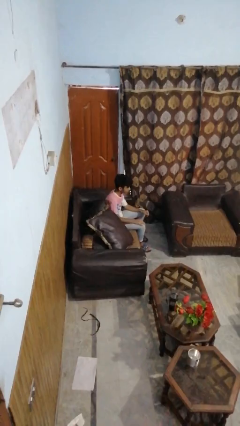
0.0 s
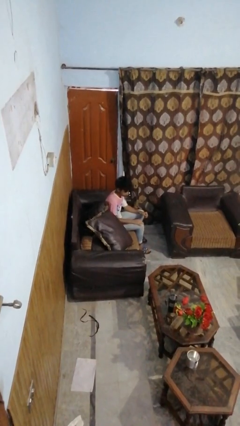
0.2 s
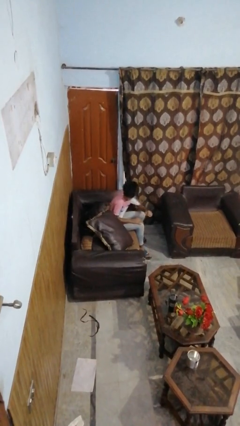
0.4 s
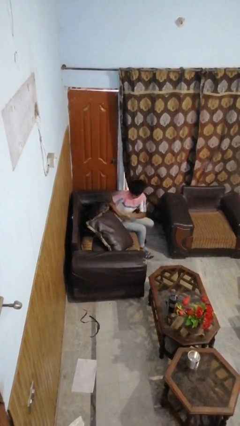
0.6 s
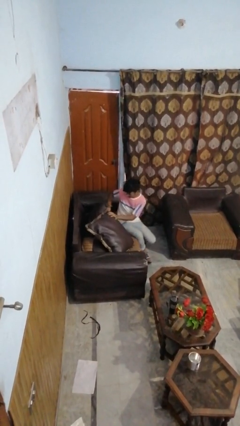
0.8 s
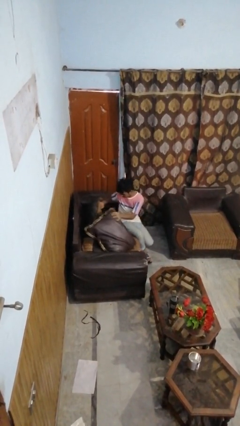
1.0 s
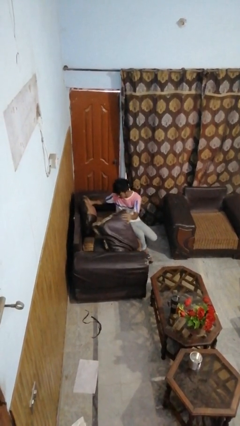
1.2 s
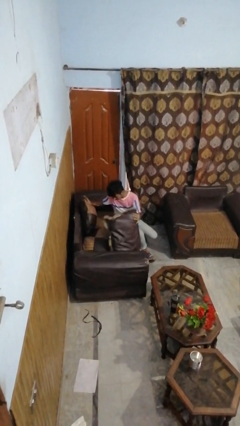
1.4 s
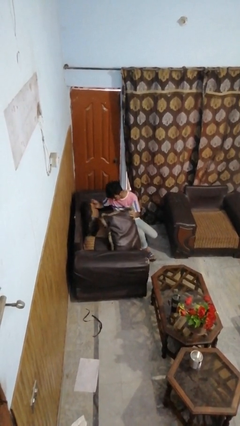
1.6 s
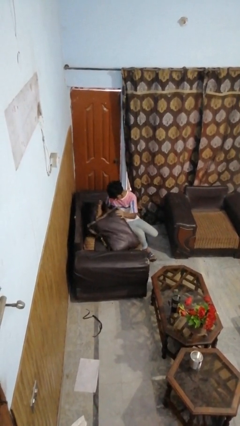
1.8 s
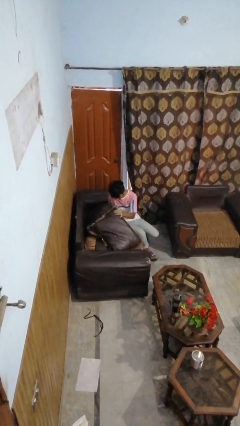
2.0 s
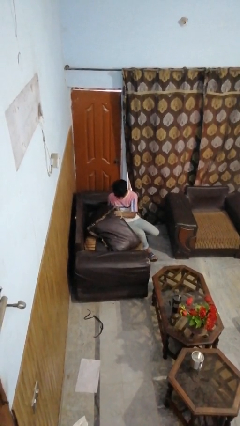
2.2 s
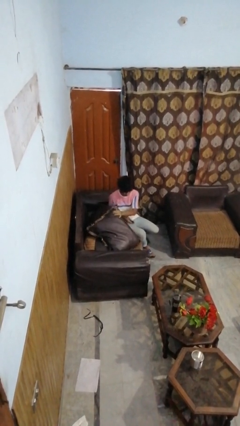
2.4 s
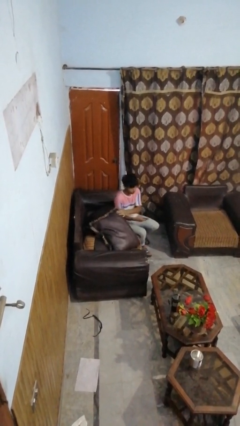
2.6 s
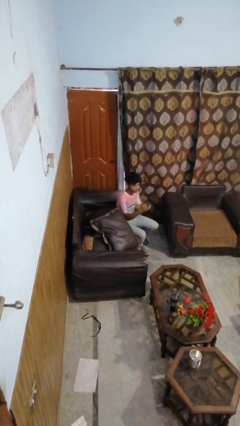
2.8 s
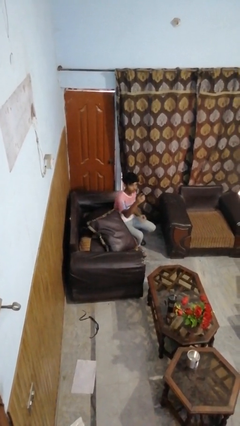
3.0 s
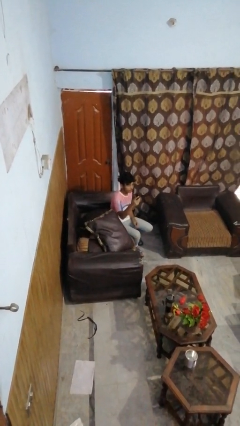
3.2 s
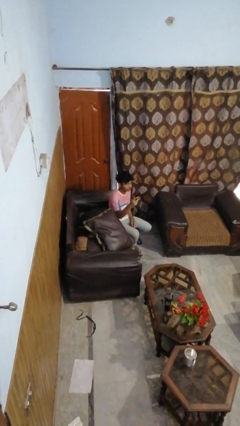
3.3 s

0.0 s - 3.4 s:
person searches in couch

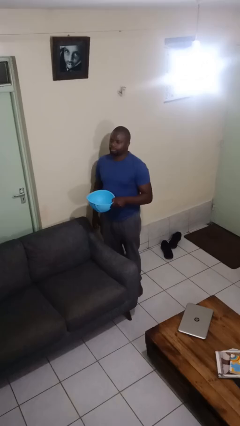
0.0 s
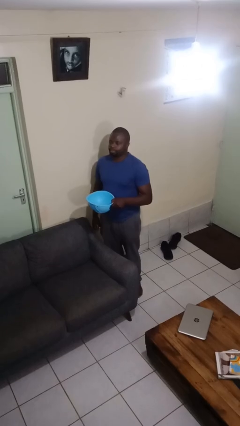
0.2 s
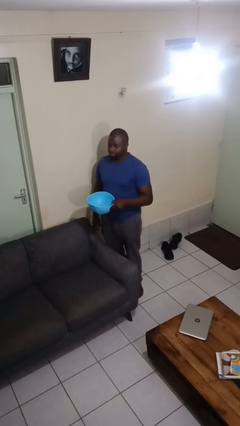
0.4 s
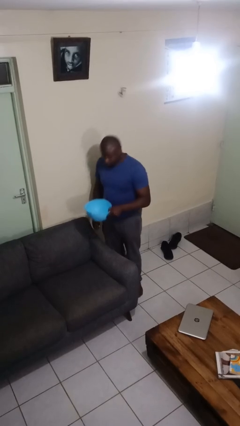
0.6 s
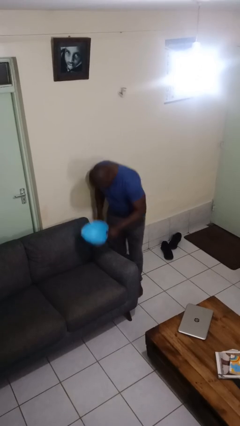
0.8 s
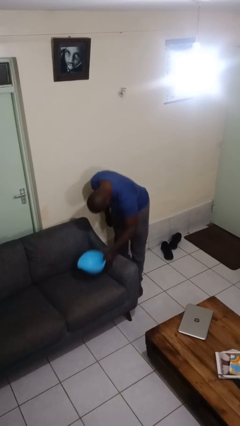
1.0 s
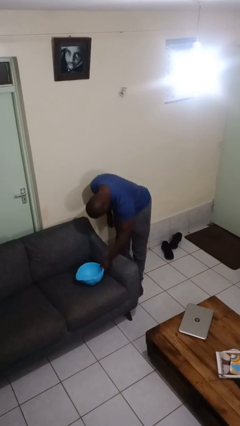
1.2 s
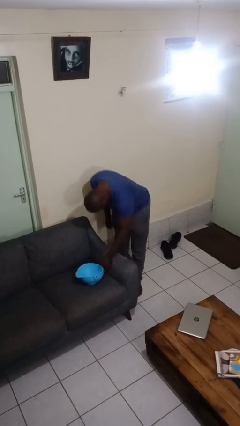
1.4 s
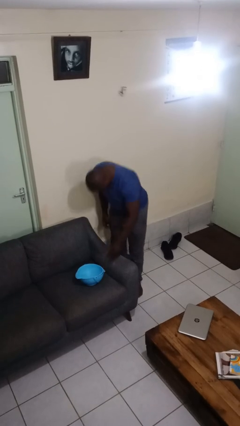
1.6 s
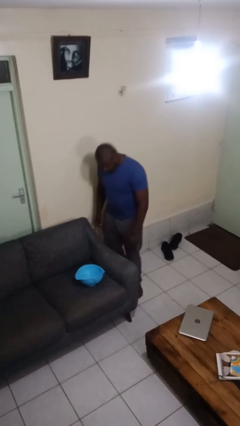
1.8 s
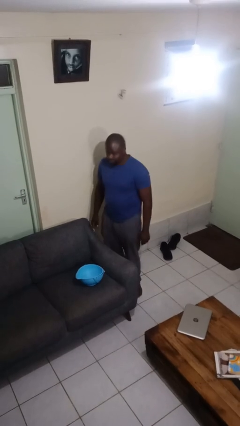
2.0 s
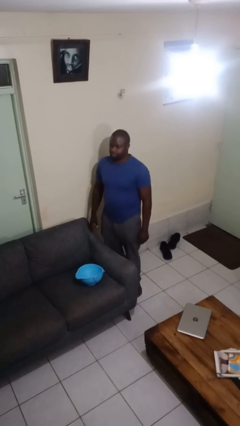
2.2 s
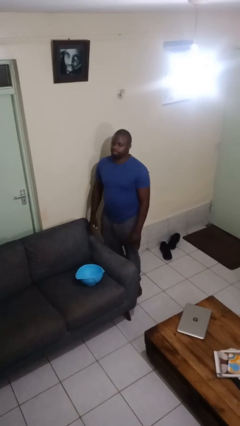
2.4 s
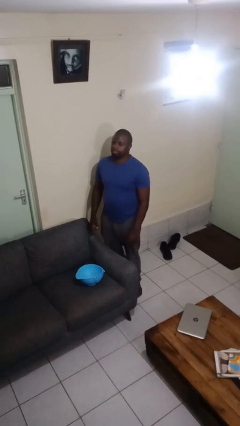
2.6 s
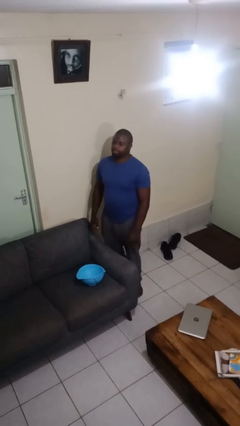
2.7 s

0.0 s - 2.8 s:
person puts down object on couch

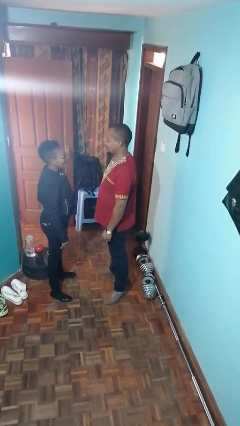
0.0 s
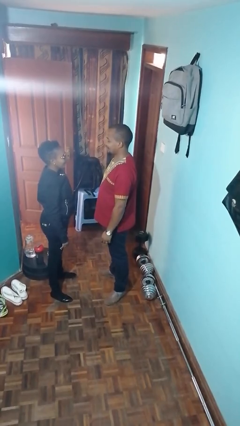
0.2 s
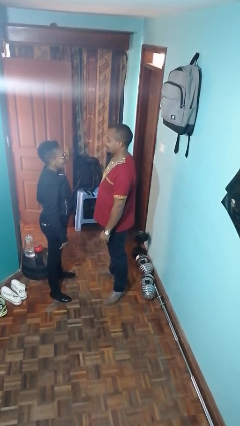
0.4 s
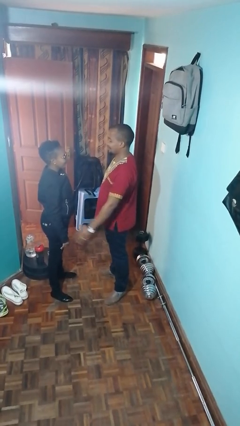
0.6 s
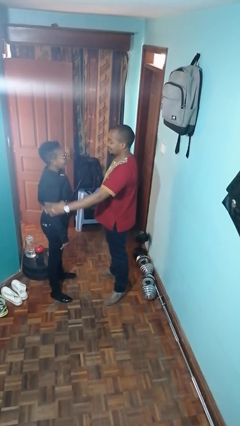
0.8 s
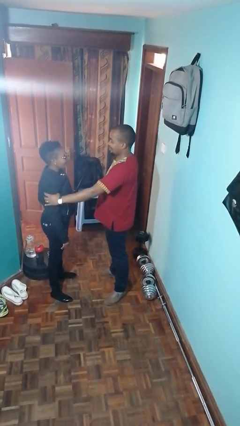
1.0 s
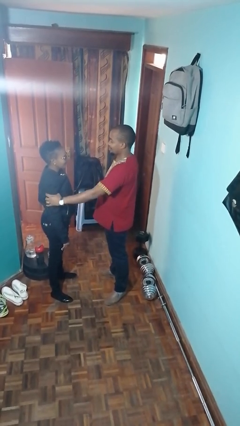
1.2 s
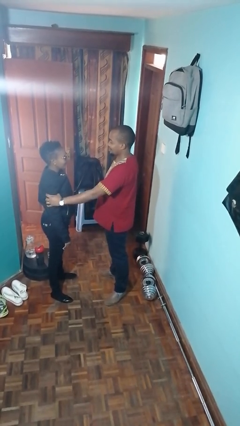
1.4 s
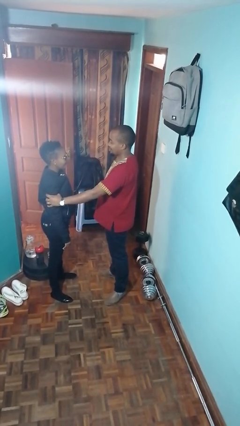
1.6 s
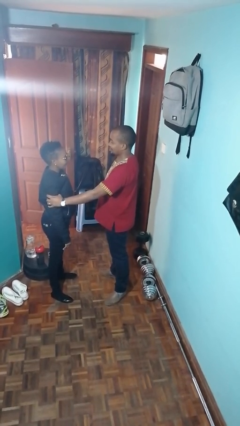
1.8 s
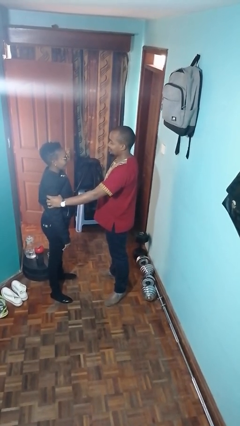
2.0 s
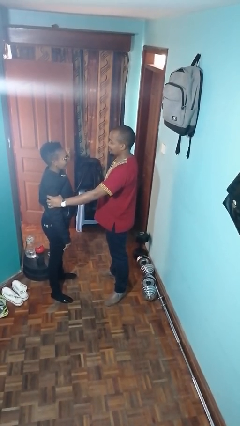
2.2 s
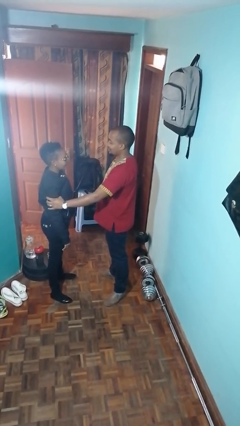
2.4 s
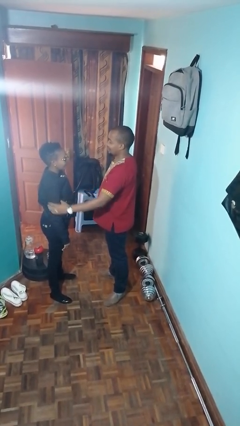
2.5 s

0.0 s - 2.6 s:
person grabs person by bicep

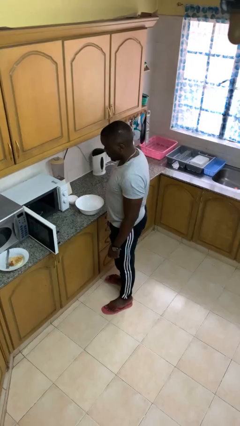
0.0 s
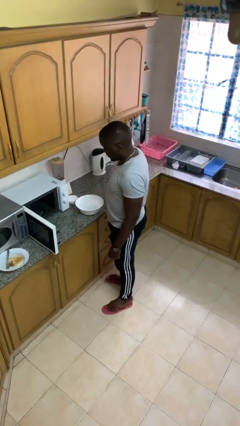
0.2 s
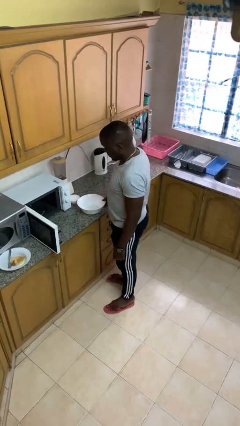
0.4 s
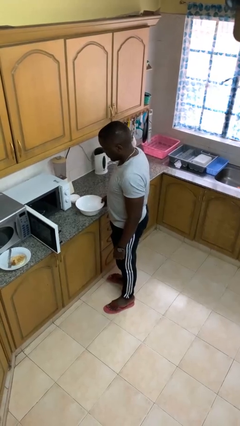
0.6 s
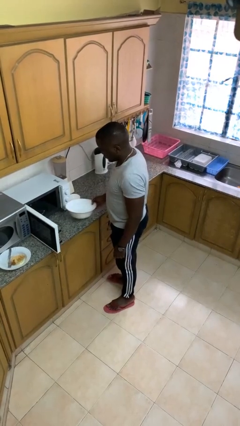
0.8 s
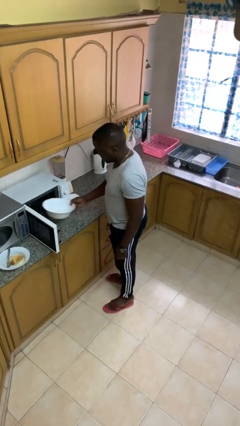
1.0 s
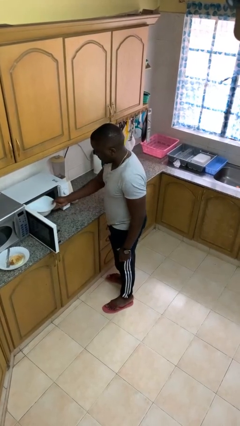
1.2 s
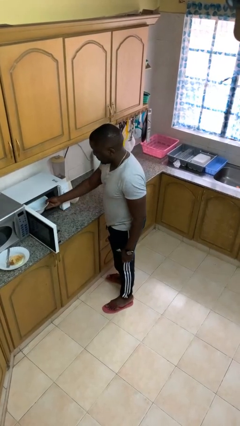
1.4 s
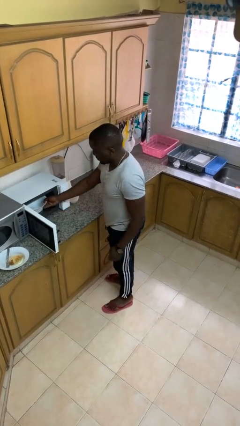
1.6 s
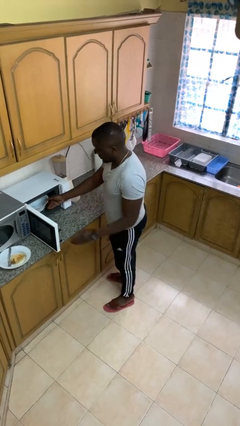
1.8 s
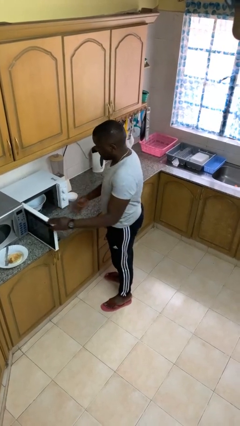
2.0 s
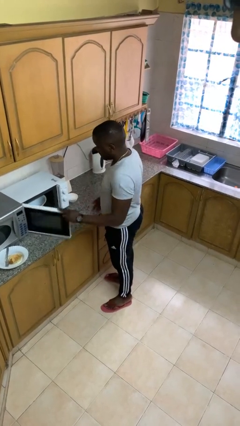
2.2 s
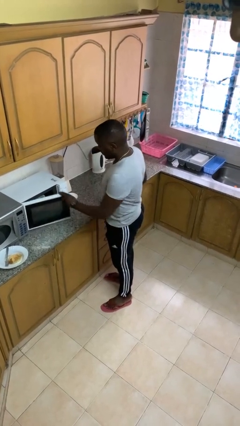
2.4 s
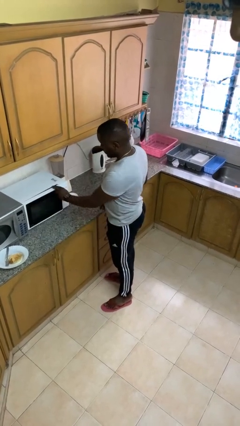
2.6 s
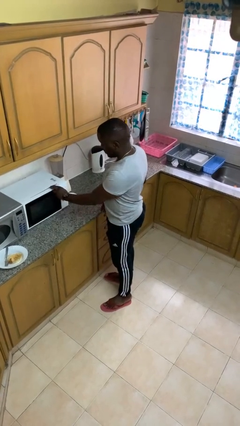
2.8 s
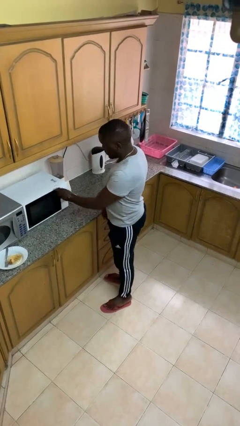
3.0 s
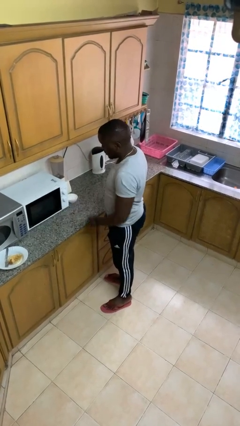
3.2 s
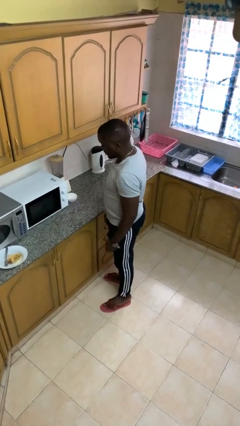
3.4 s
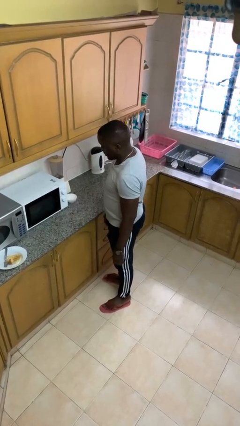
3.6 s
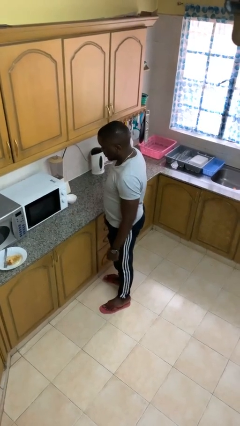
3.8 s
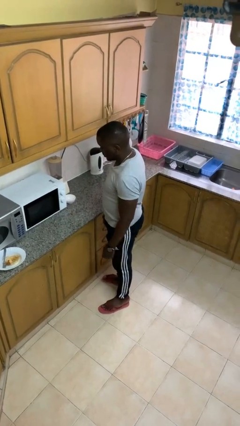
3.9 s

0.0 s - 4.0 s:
person puts object into microwave

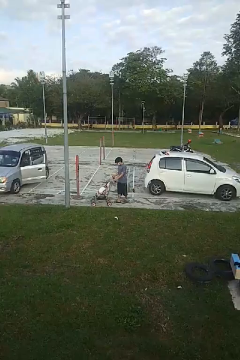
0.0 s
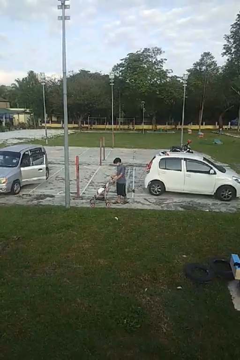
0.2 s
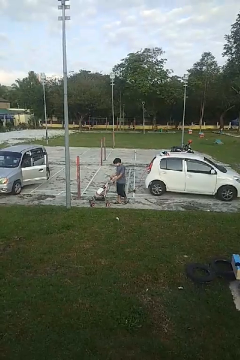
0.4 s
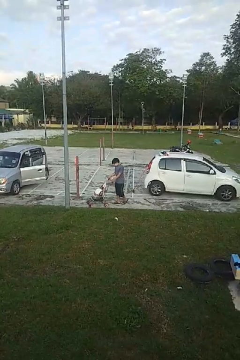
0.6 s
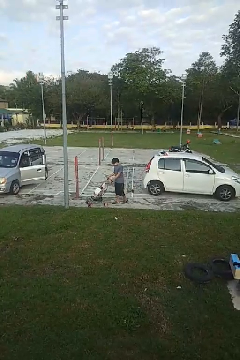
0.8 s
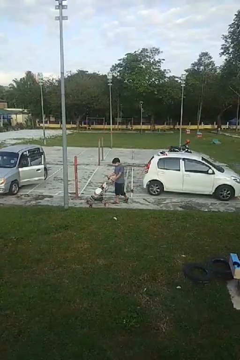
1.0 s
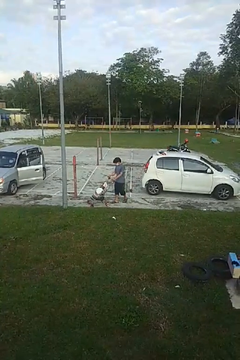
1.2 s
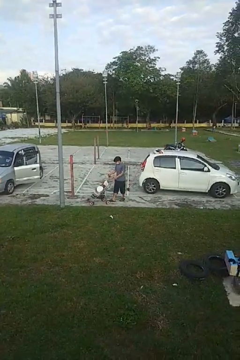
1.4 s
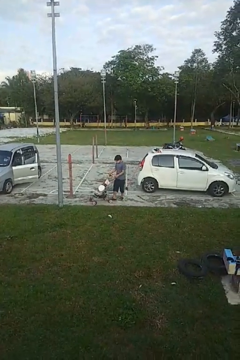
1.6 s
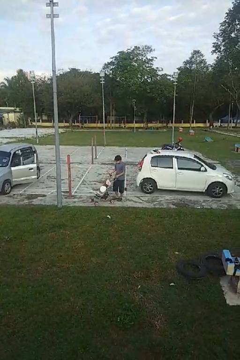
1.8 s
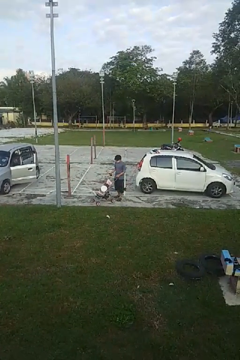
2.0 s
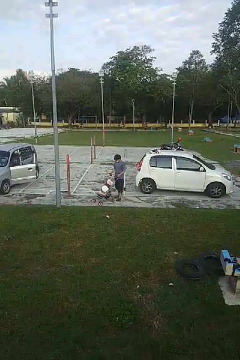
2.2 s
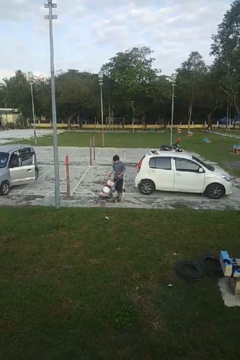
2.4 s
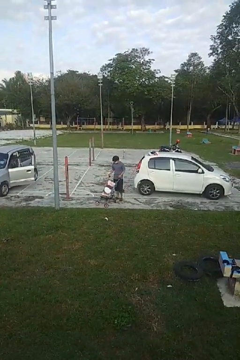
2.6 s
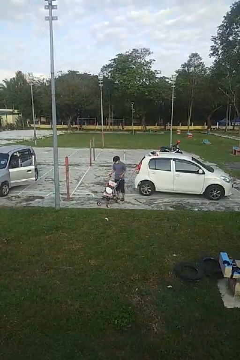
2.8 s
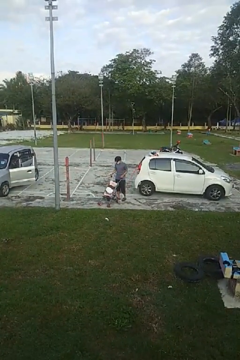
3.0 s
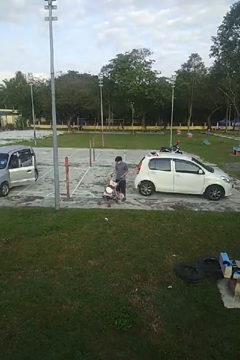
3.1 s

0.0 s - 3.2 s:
person pulls wheeled cart

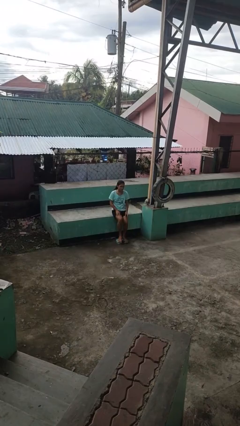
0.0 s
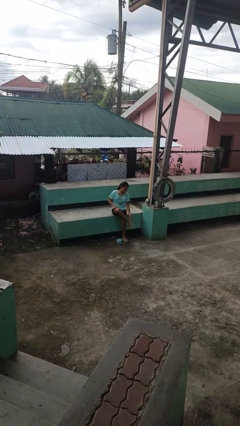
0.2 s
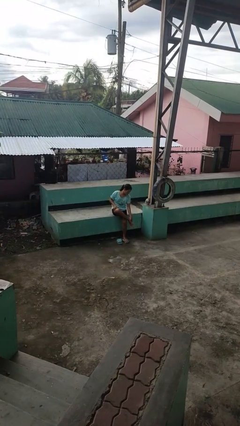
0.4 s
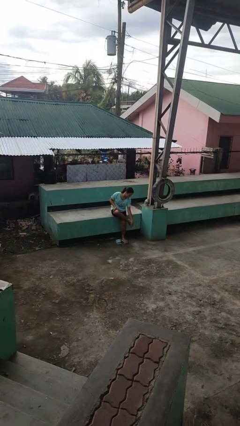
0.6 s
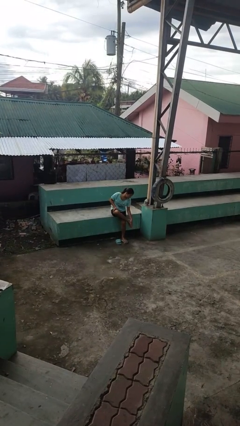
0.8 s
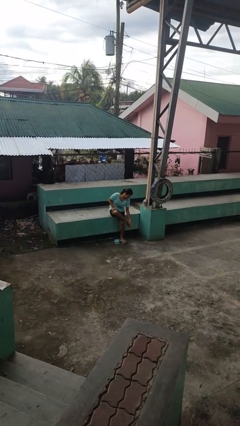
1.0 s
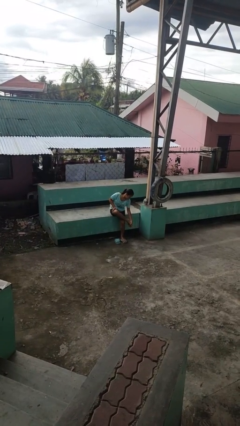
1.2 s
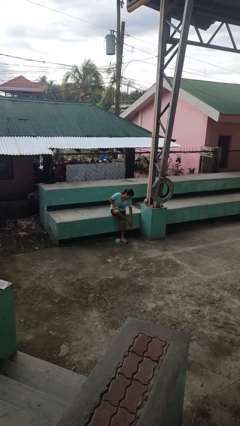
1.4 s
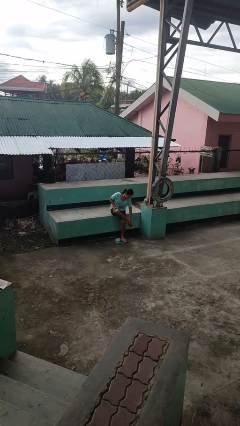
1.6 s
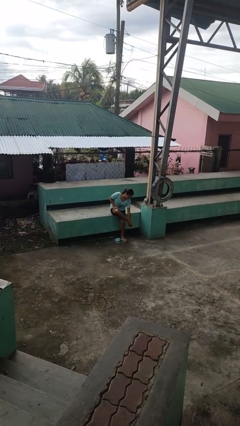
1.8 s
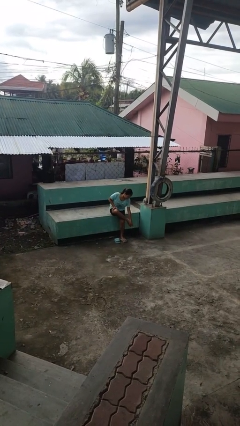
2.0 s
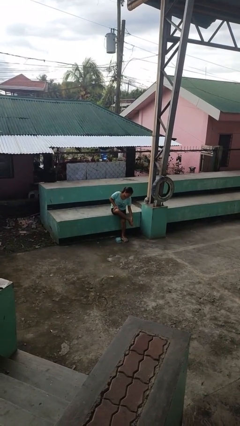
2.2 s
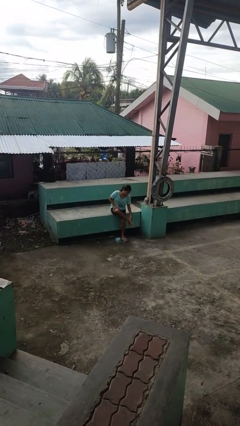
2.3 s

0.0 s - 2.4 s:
person rubs foot
